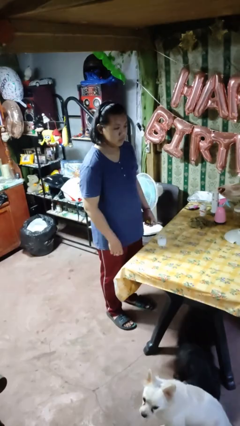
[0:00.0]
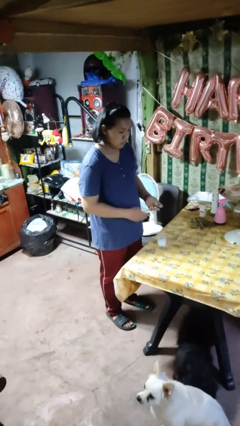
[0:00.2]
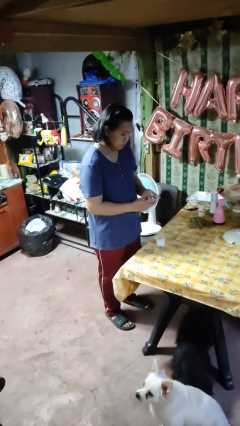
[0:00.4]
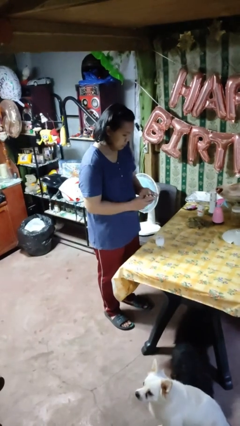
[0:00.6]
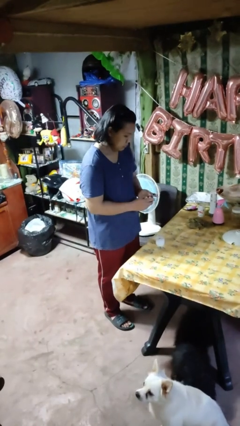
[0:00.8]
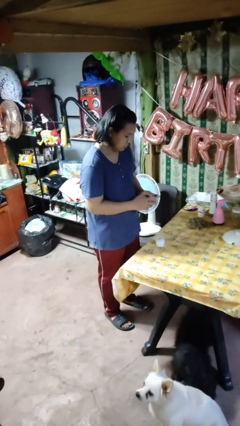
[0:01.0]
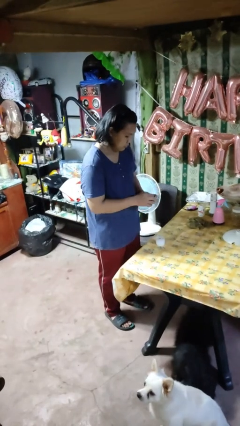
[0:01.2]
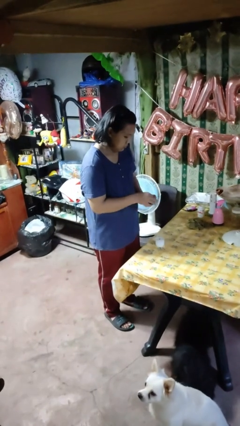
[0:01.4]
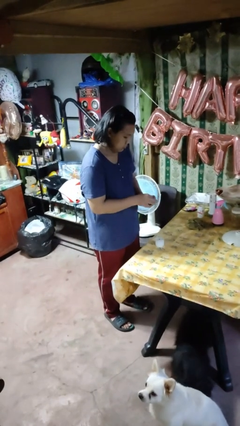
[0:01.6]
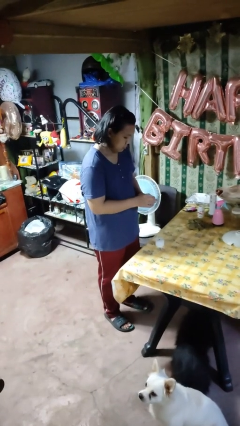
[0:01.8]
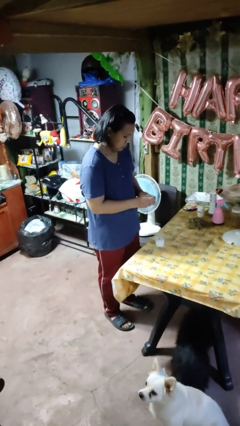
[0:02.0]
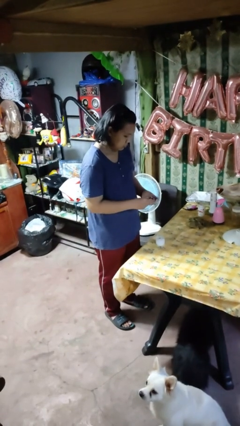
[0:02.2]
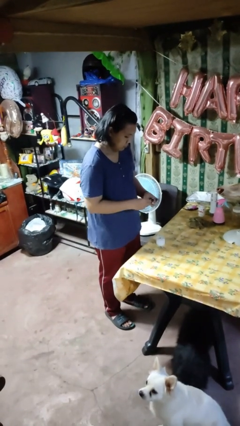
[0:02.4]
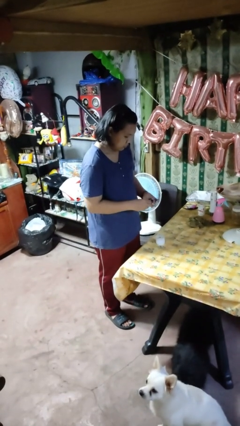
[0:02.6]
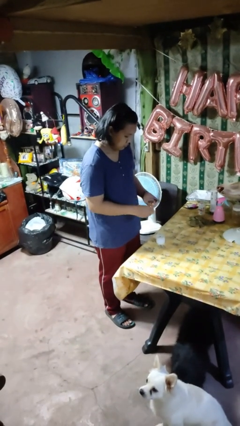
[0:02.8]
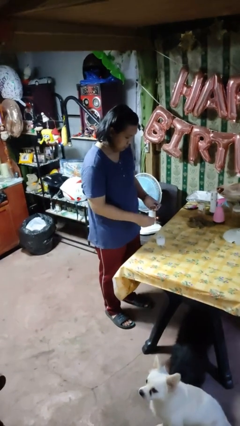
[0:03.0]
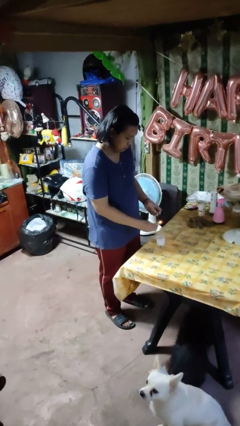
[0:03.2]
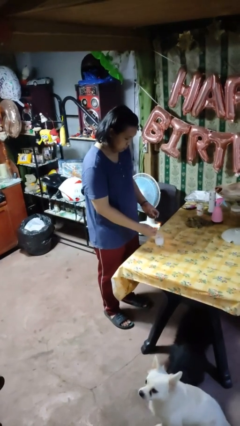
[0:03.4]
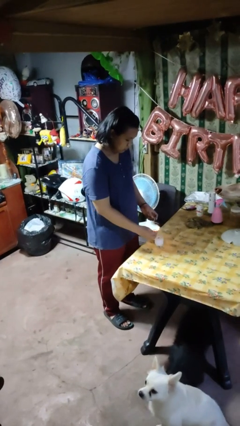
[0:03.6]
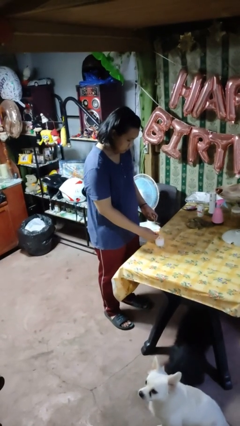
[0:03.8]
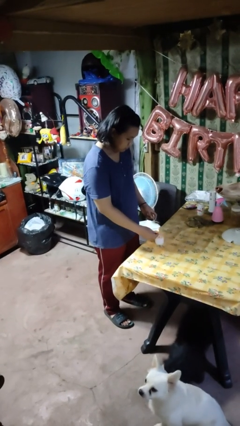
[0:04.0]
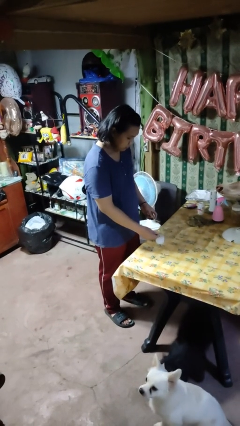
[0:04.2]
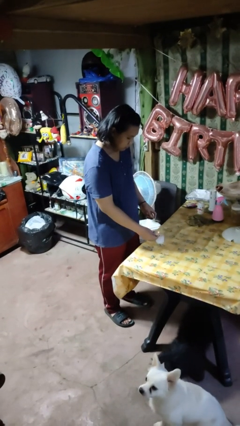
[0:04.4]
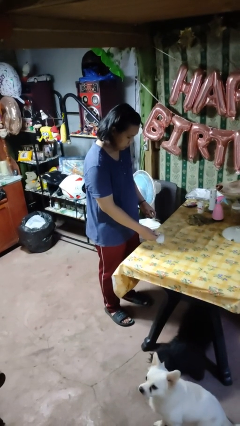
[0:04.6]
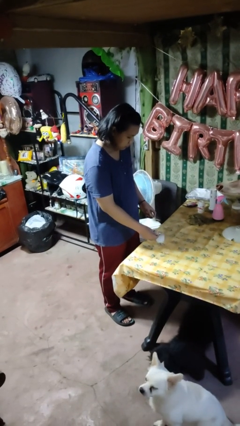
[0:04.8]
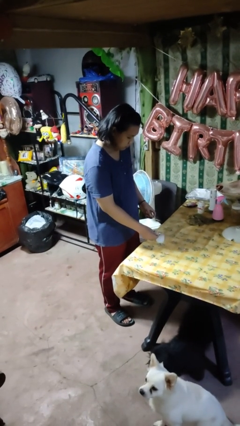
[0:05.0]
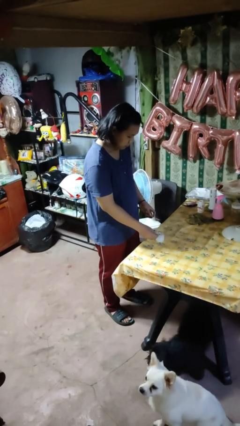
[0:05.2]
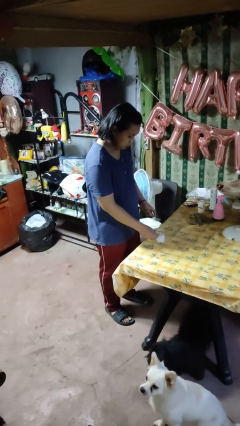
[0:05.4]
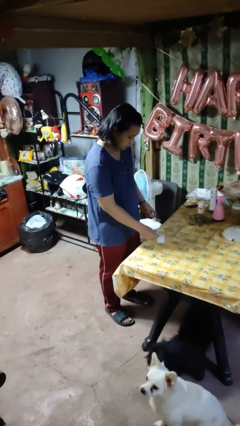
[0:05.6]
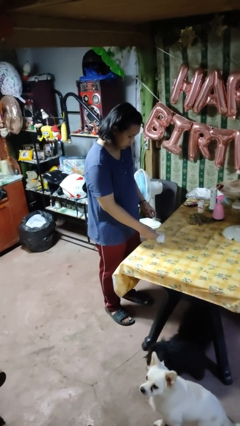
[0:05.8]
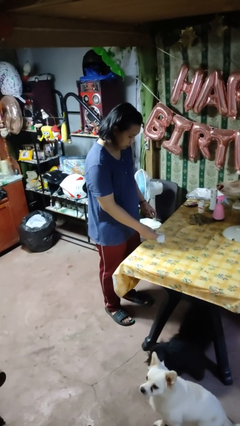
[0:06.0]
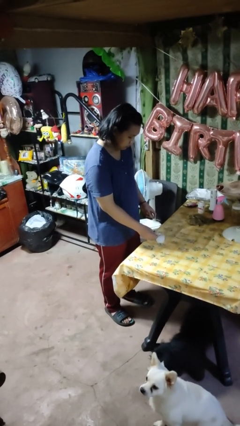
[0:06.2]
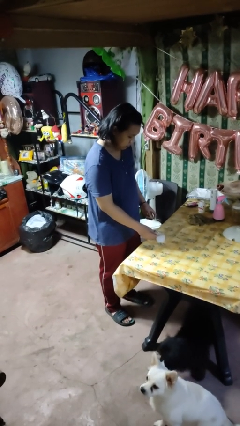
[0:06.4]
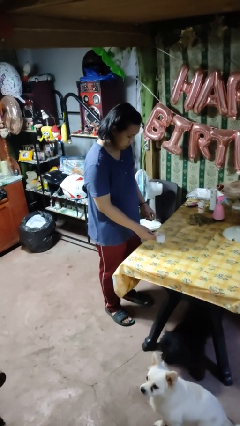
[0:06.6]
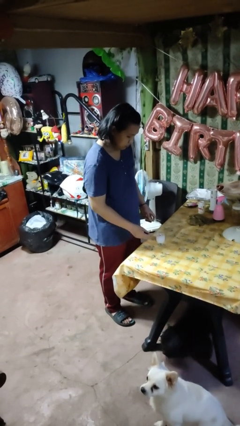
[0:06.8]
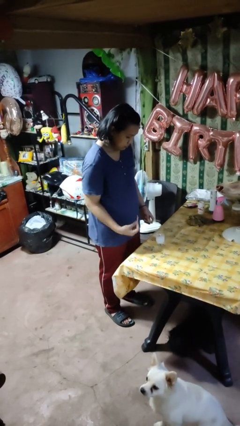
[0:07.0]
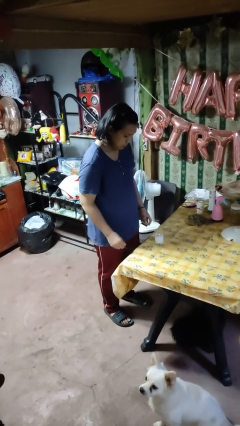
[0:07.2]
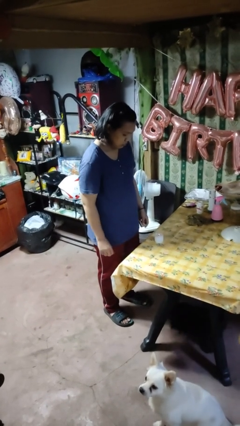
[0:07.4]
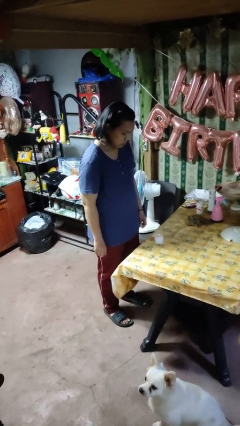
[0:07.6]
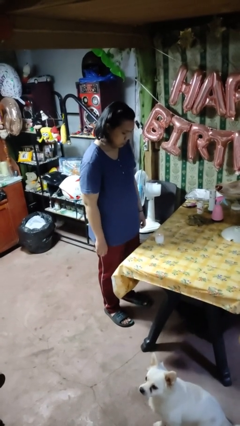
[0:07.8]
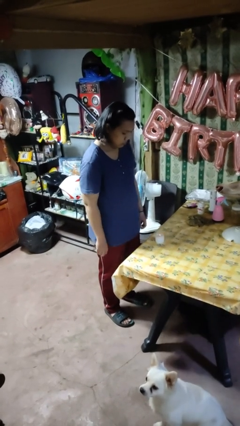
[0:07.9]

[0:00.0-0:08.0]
person lights candle

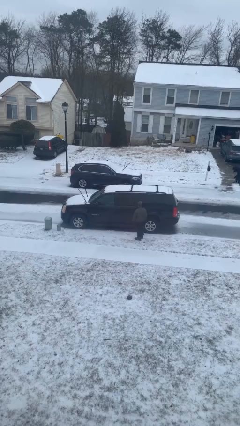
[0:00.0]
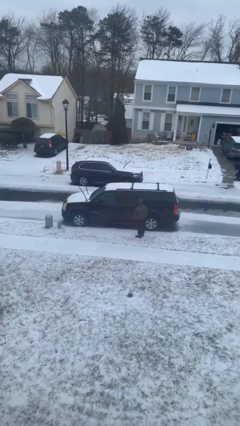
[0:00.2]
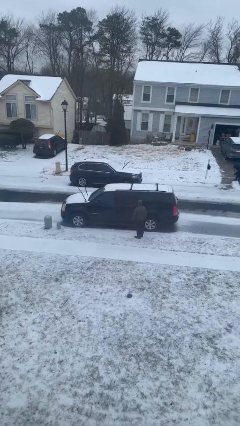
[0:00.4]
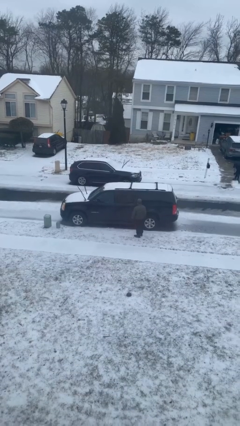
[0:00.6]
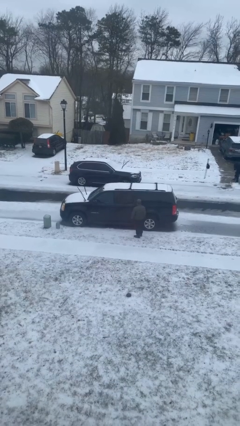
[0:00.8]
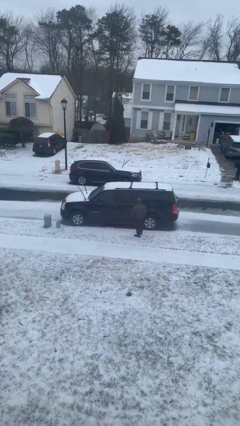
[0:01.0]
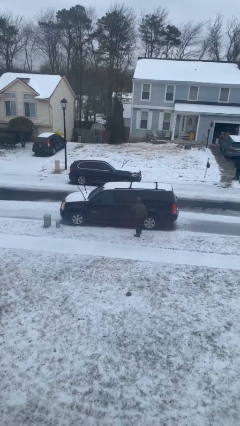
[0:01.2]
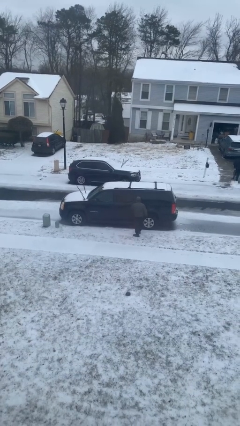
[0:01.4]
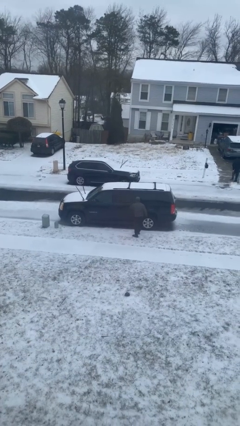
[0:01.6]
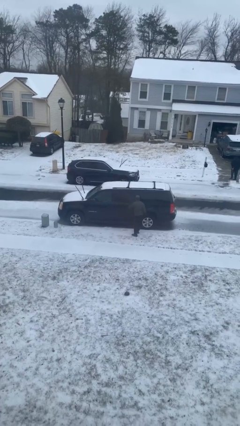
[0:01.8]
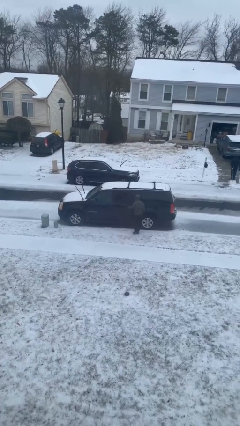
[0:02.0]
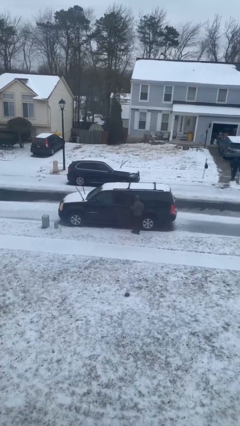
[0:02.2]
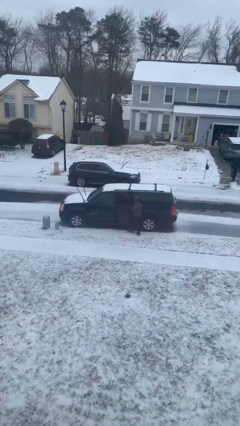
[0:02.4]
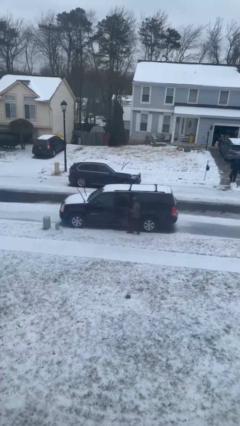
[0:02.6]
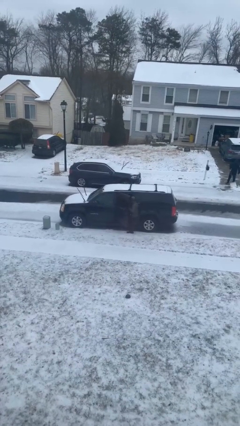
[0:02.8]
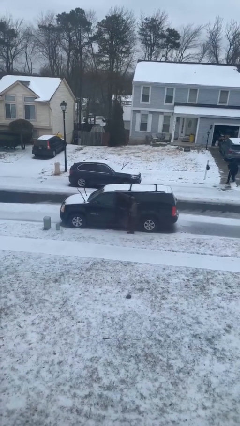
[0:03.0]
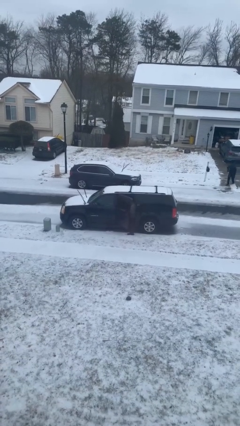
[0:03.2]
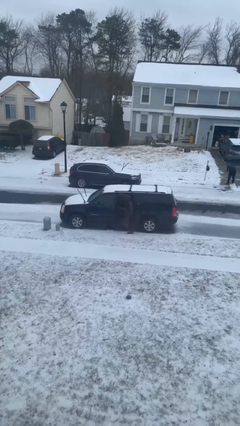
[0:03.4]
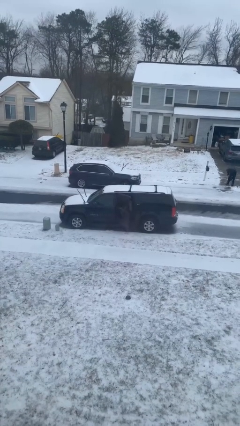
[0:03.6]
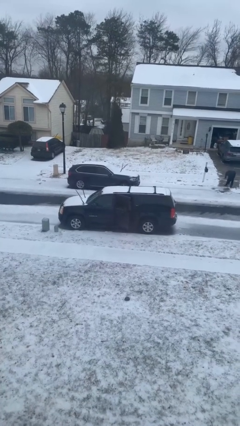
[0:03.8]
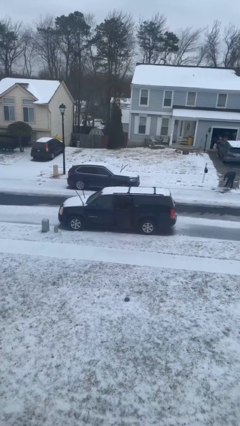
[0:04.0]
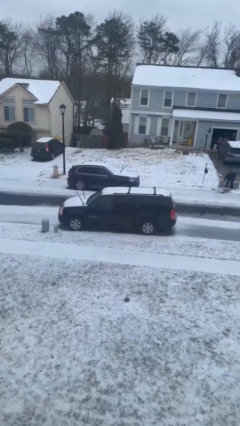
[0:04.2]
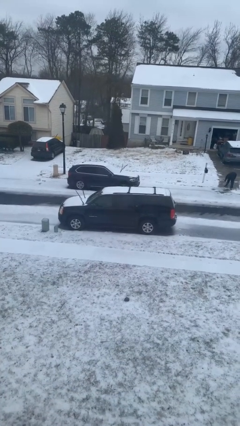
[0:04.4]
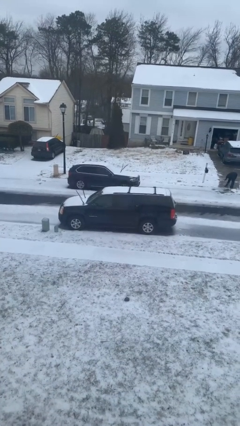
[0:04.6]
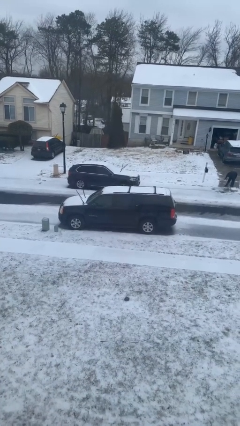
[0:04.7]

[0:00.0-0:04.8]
car picks up person

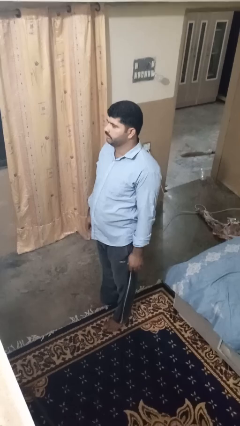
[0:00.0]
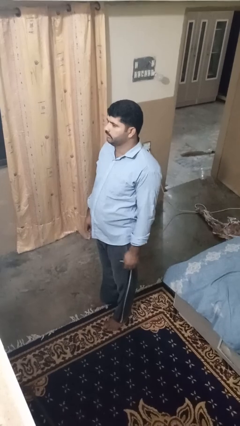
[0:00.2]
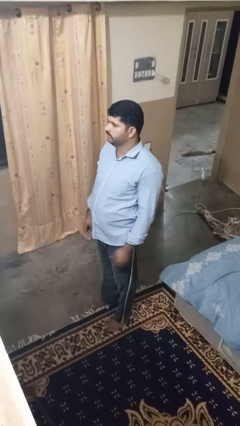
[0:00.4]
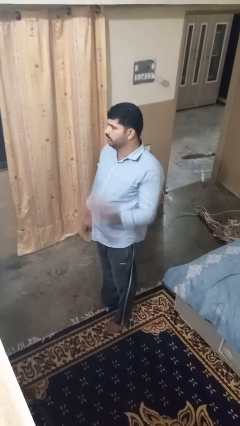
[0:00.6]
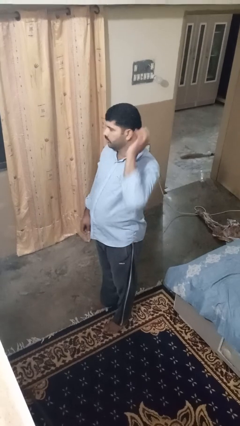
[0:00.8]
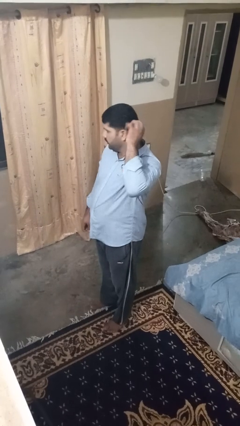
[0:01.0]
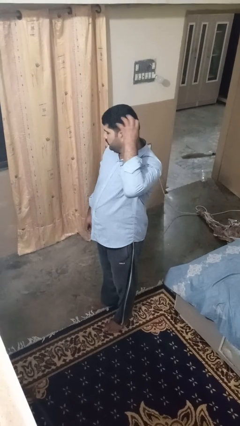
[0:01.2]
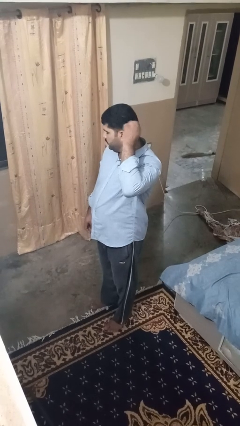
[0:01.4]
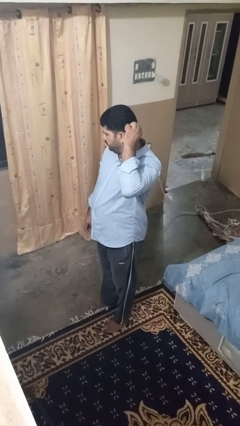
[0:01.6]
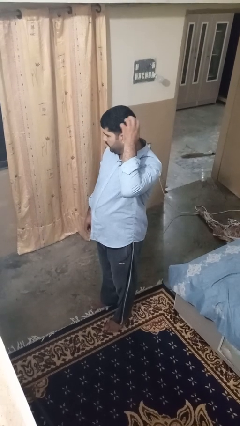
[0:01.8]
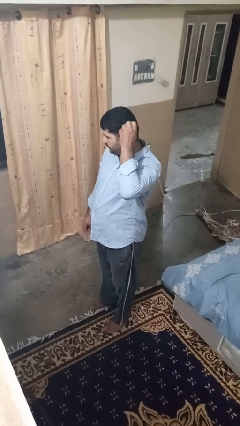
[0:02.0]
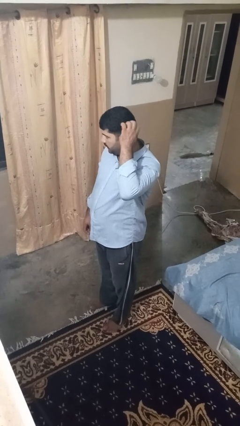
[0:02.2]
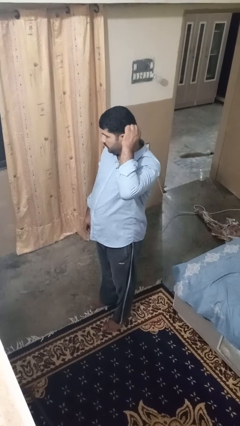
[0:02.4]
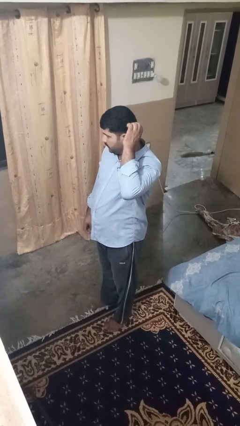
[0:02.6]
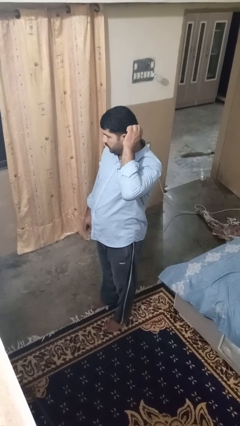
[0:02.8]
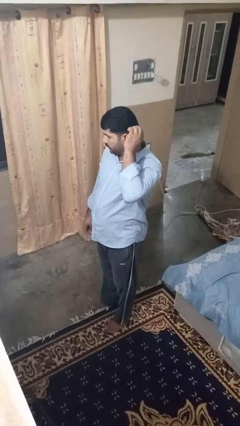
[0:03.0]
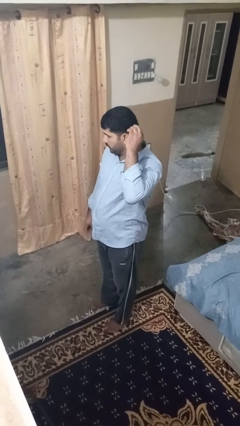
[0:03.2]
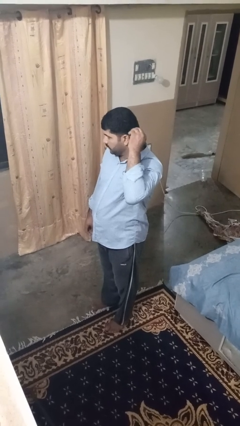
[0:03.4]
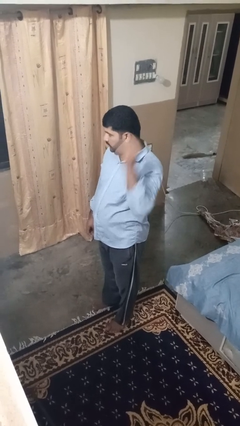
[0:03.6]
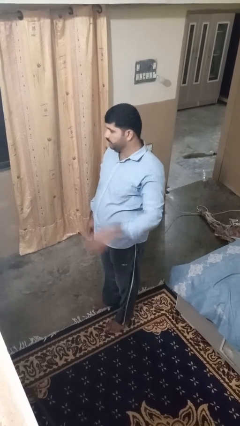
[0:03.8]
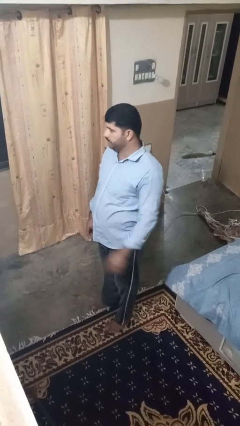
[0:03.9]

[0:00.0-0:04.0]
person strokes hair

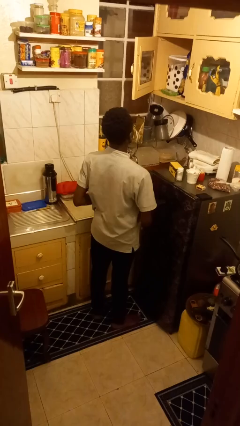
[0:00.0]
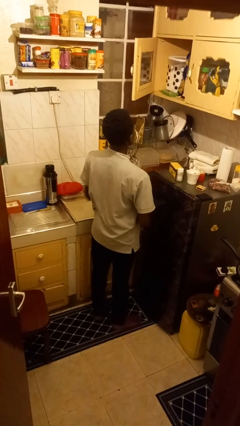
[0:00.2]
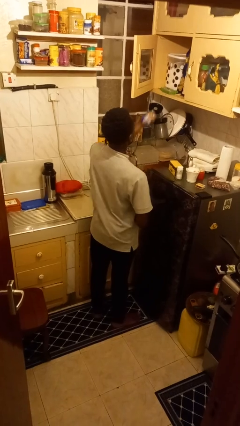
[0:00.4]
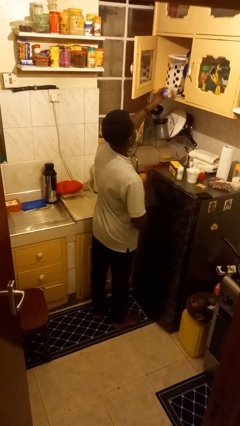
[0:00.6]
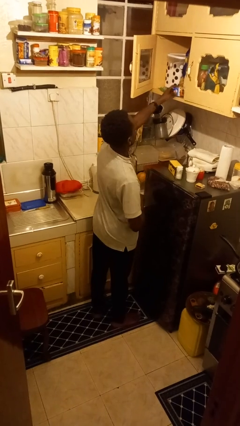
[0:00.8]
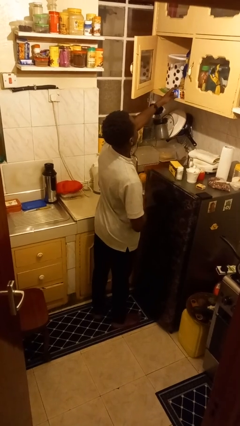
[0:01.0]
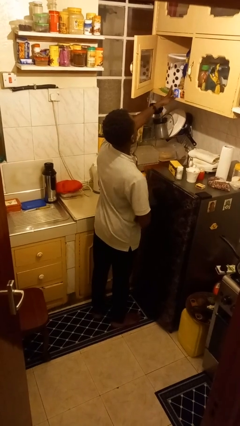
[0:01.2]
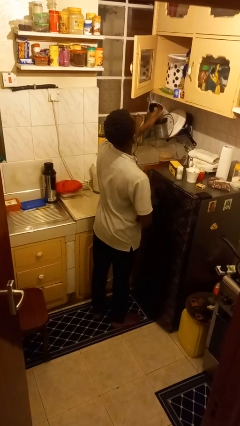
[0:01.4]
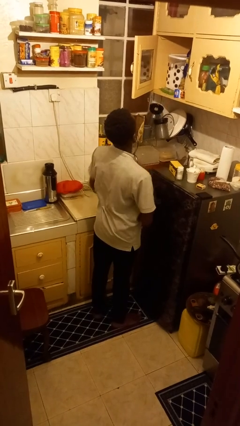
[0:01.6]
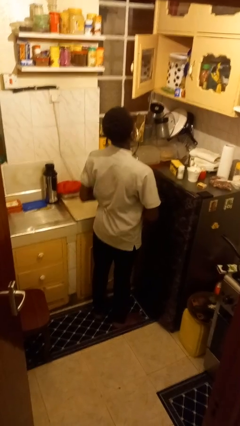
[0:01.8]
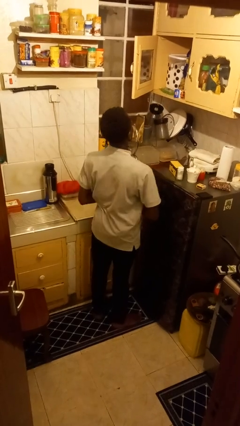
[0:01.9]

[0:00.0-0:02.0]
person puts down object into cabinet
